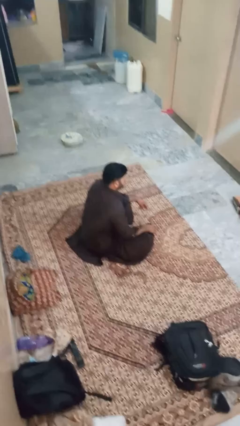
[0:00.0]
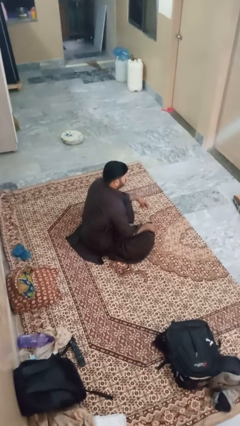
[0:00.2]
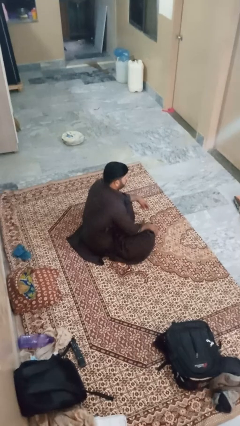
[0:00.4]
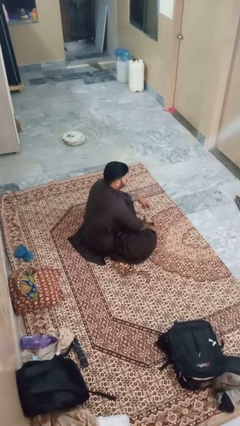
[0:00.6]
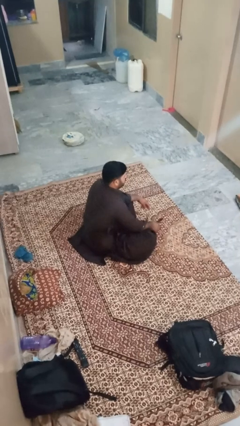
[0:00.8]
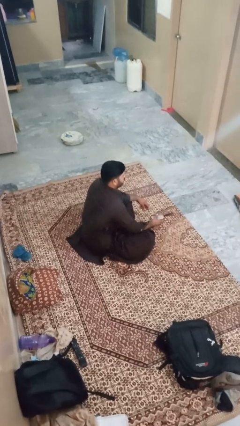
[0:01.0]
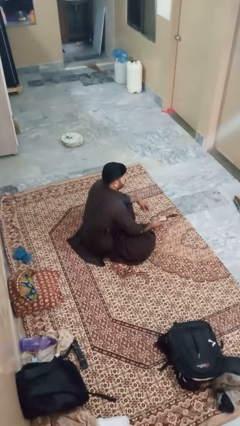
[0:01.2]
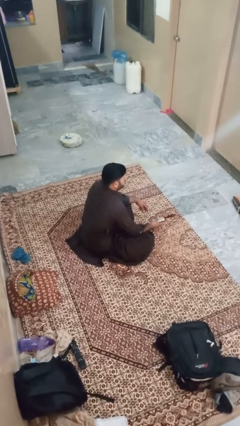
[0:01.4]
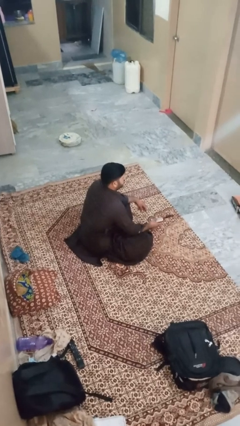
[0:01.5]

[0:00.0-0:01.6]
person picks up object from floor

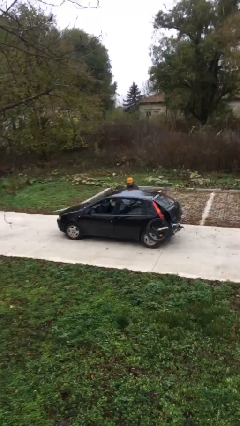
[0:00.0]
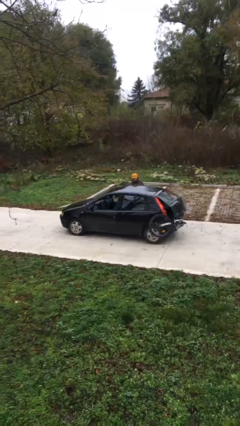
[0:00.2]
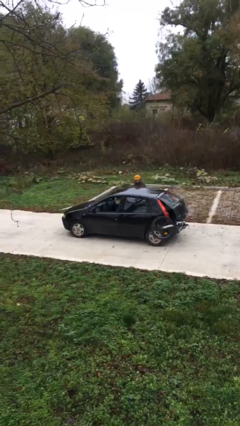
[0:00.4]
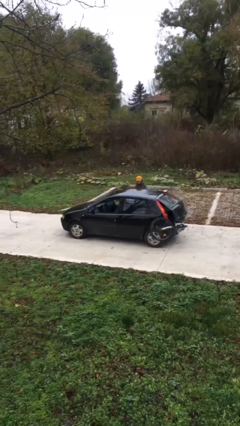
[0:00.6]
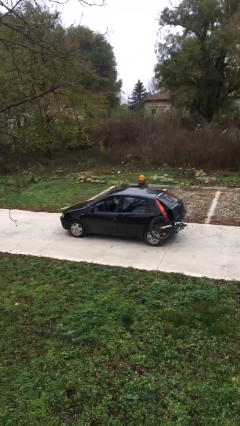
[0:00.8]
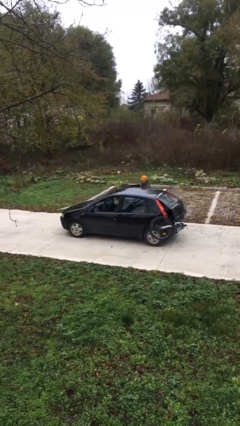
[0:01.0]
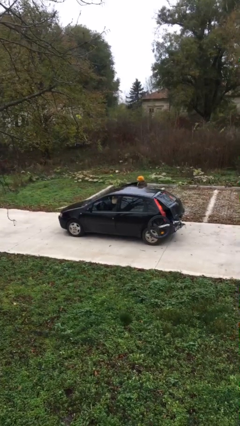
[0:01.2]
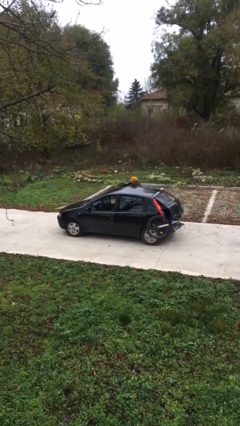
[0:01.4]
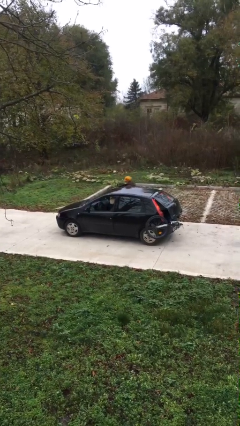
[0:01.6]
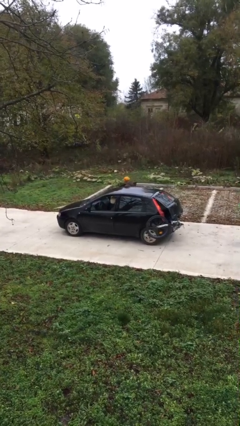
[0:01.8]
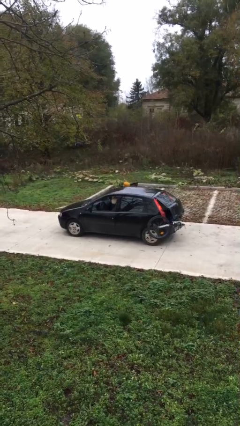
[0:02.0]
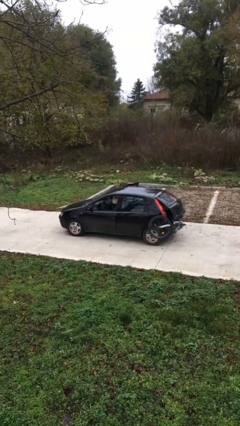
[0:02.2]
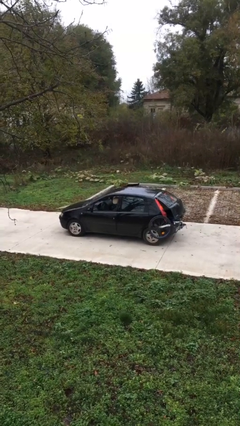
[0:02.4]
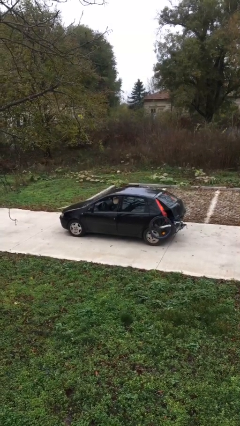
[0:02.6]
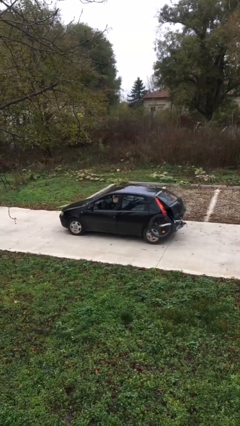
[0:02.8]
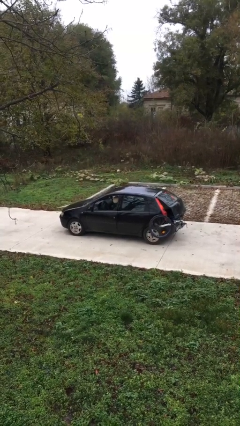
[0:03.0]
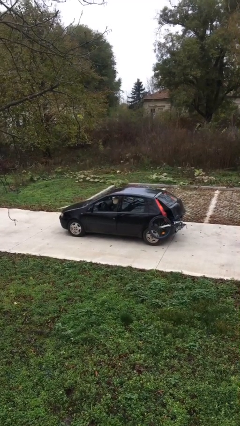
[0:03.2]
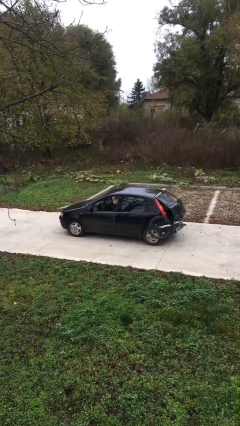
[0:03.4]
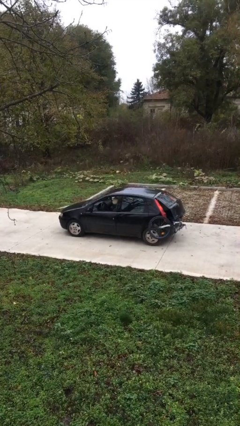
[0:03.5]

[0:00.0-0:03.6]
car picks up person

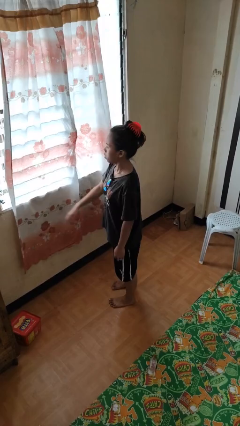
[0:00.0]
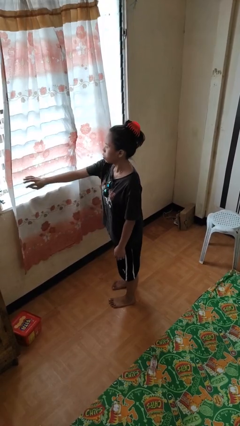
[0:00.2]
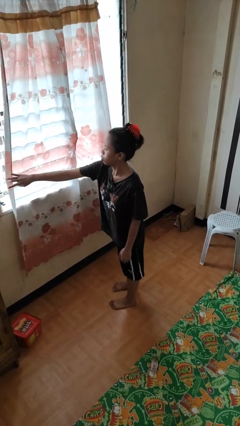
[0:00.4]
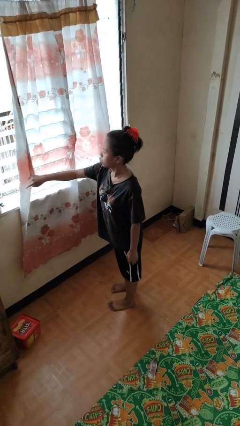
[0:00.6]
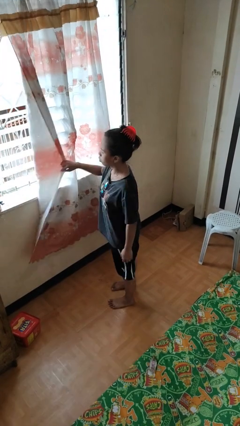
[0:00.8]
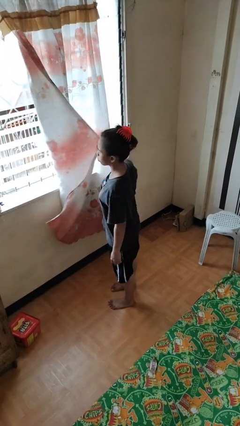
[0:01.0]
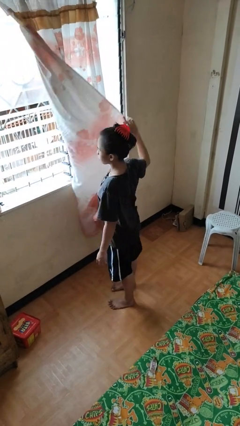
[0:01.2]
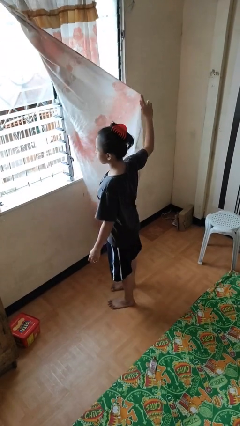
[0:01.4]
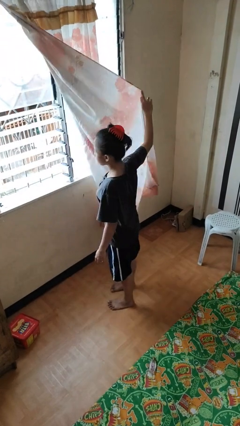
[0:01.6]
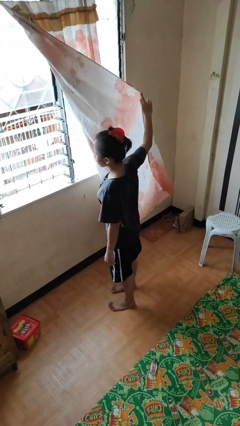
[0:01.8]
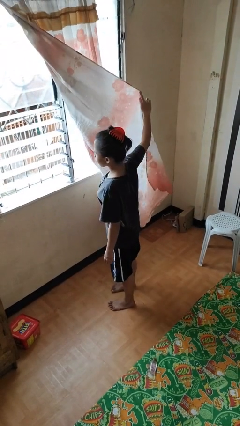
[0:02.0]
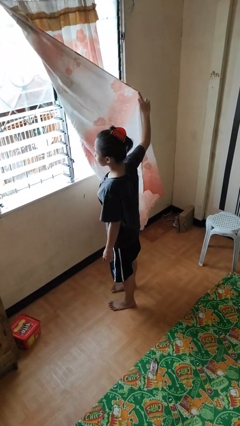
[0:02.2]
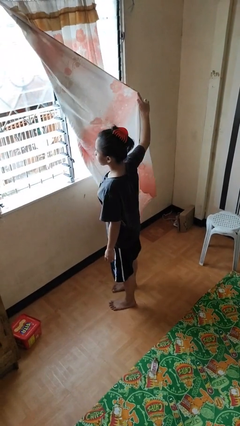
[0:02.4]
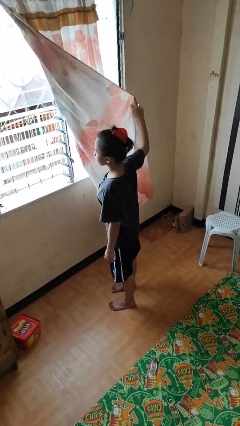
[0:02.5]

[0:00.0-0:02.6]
person opens curtains

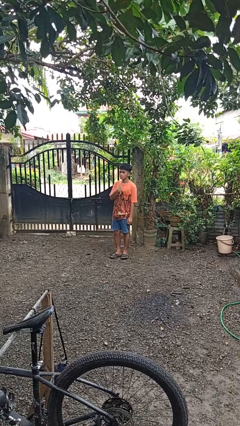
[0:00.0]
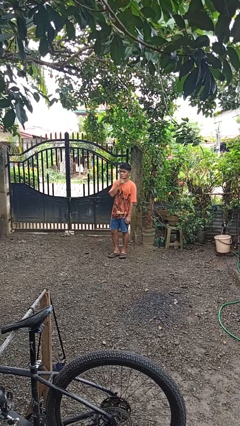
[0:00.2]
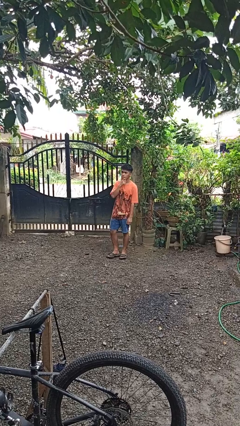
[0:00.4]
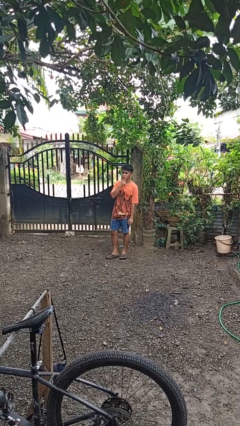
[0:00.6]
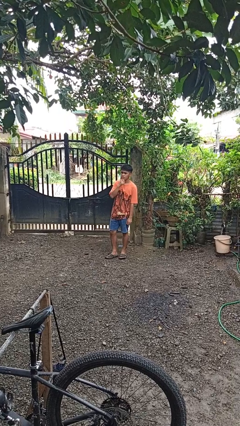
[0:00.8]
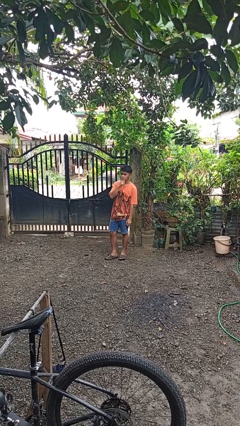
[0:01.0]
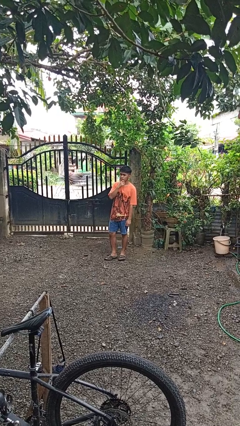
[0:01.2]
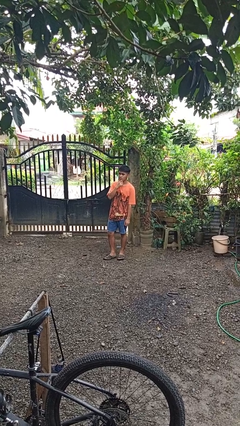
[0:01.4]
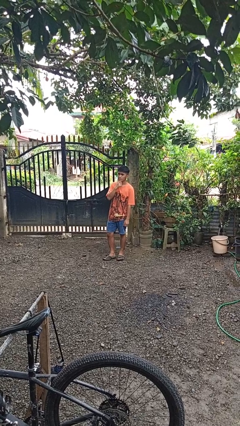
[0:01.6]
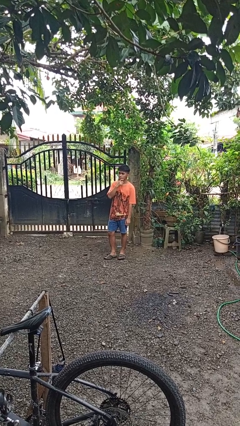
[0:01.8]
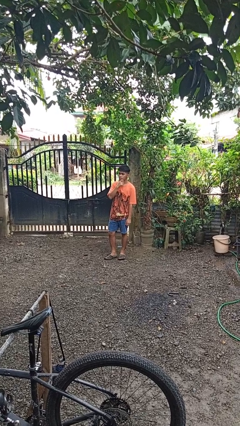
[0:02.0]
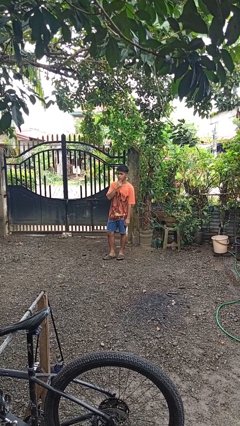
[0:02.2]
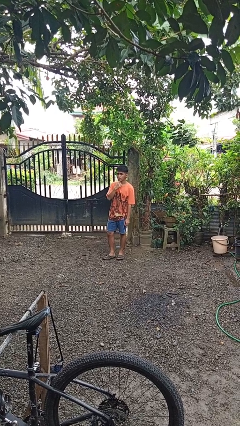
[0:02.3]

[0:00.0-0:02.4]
person strokes chin

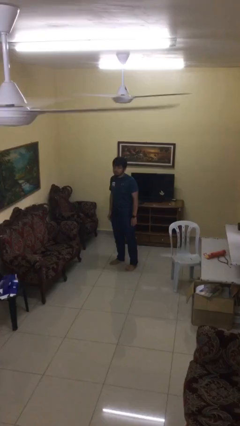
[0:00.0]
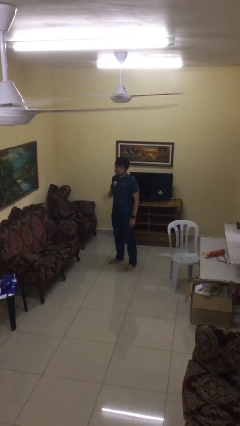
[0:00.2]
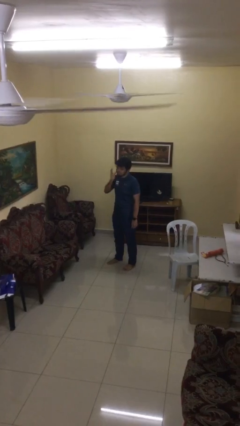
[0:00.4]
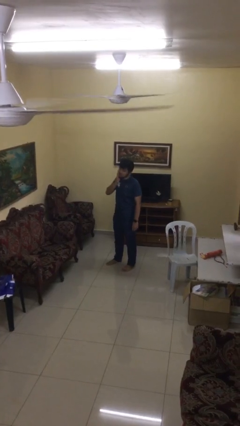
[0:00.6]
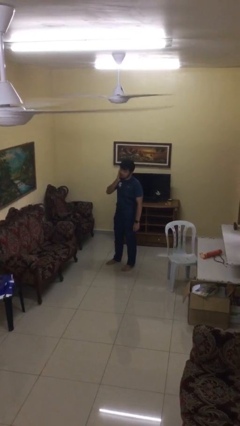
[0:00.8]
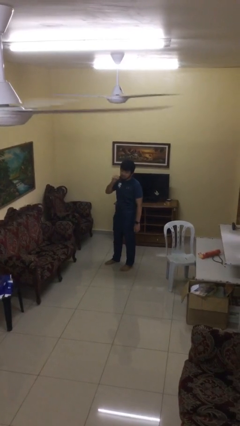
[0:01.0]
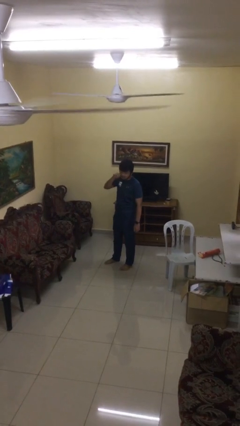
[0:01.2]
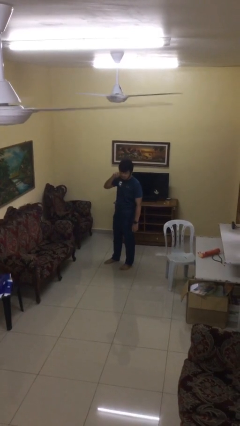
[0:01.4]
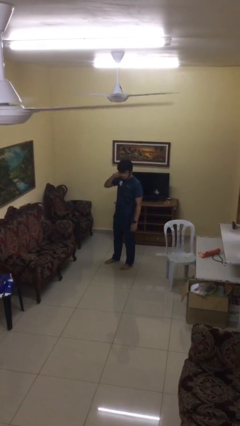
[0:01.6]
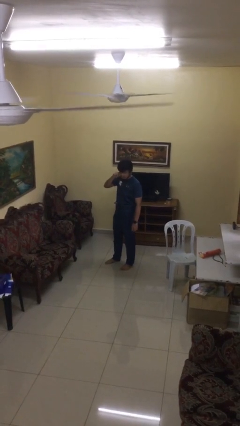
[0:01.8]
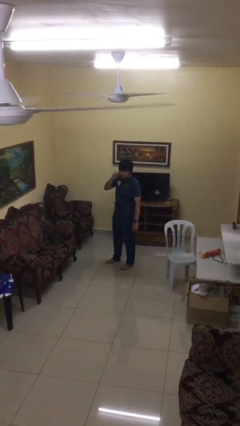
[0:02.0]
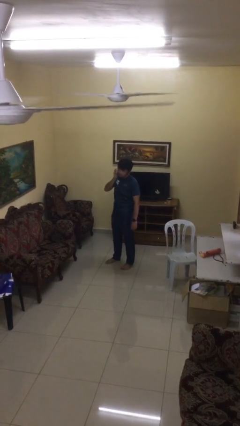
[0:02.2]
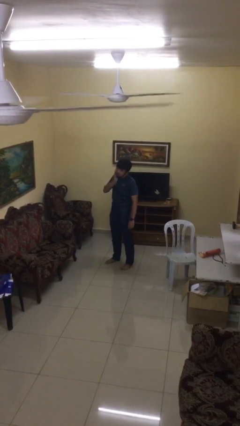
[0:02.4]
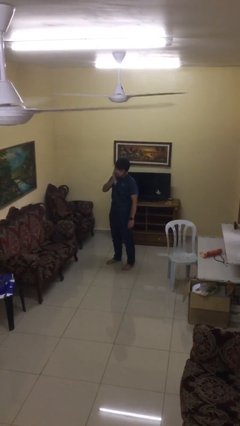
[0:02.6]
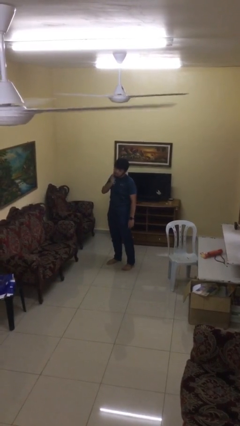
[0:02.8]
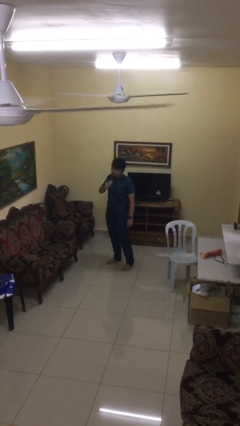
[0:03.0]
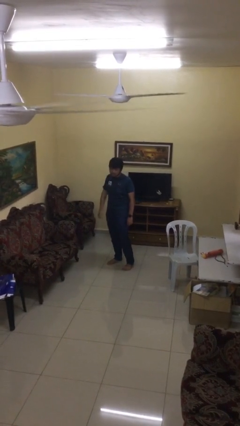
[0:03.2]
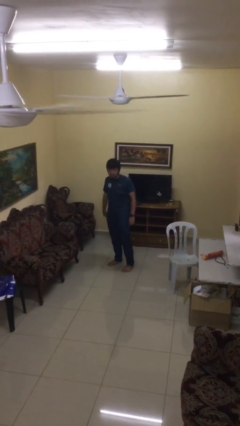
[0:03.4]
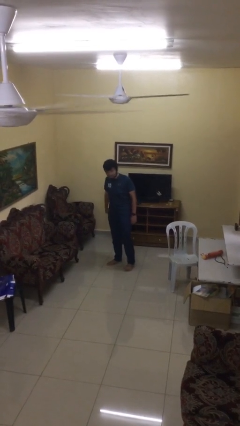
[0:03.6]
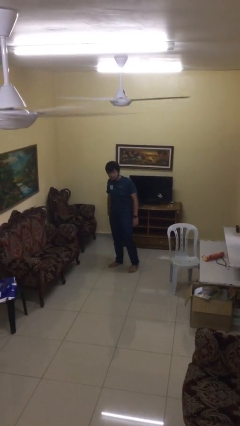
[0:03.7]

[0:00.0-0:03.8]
person scratches face

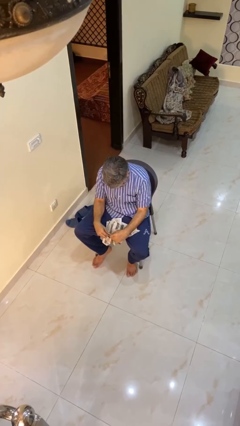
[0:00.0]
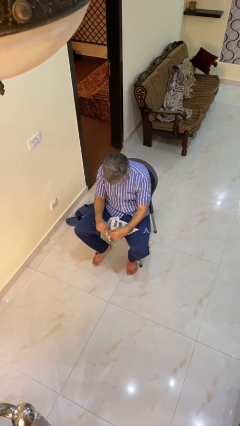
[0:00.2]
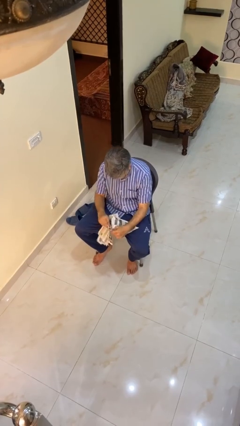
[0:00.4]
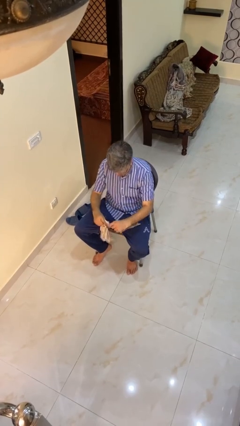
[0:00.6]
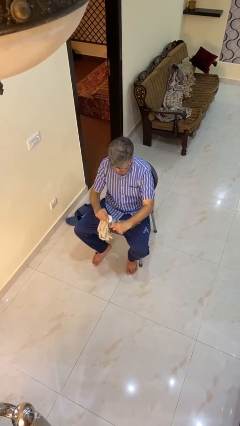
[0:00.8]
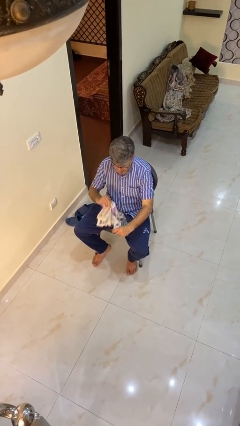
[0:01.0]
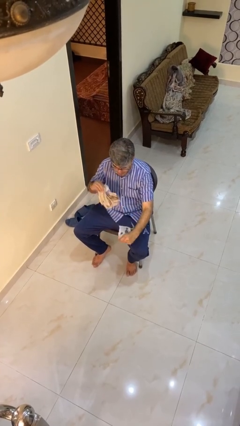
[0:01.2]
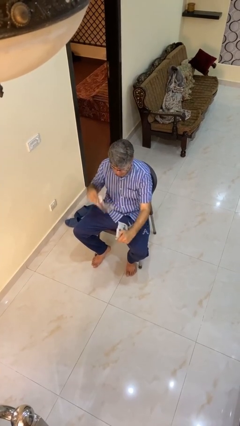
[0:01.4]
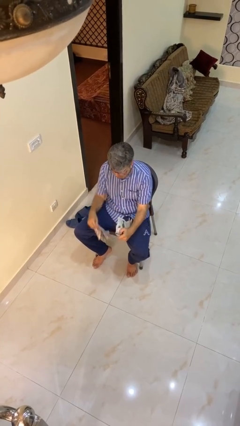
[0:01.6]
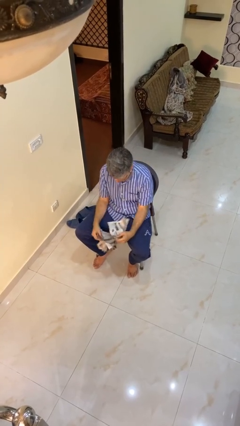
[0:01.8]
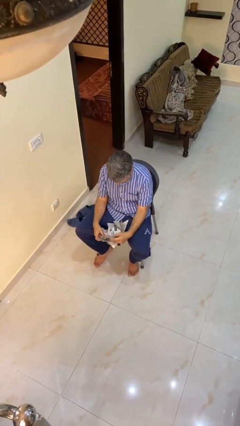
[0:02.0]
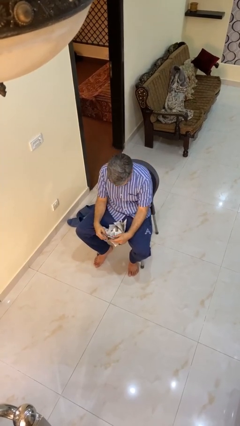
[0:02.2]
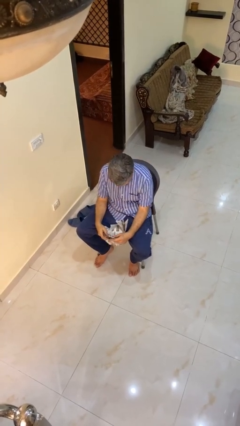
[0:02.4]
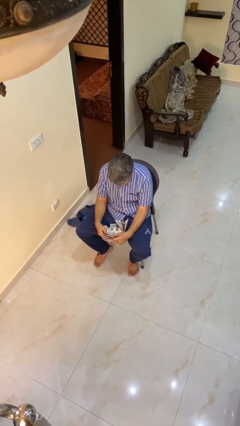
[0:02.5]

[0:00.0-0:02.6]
person tears paper

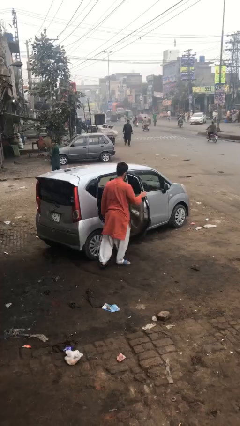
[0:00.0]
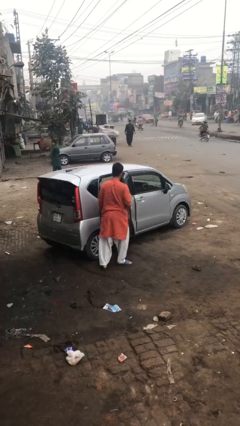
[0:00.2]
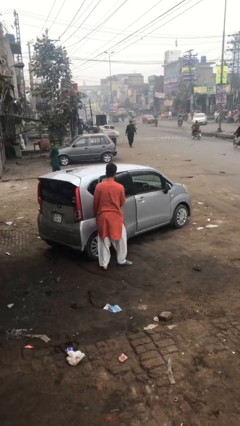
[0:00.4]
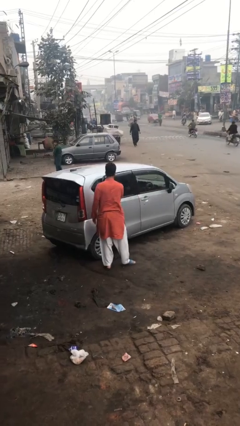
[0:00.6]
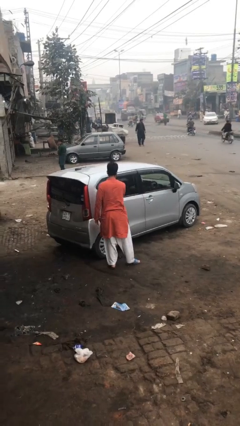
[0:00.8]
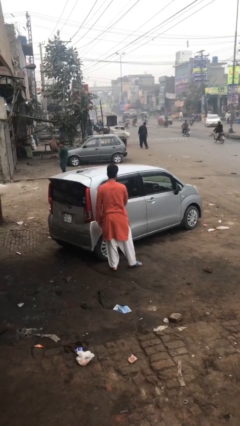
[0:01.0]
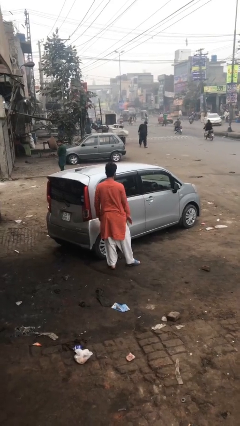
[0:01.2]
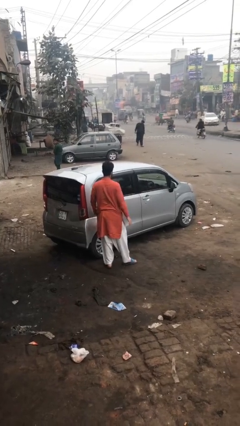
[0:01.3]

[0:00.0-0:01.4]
person closes car door
